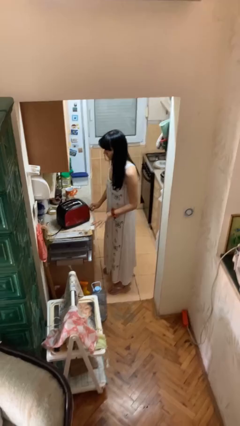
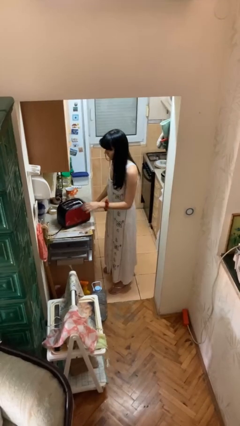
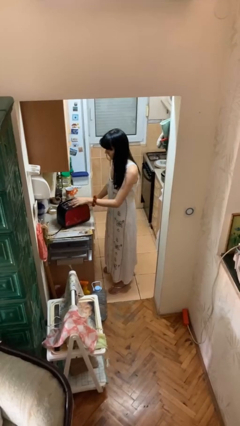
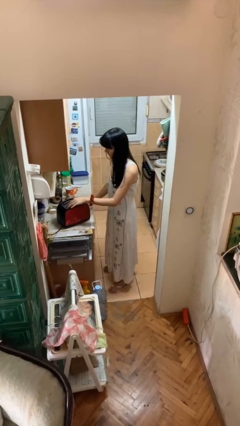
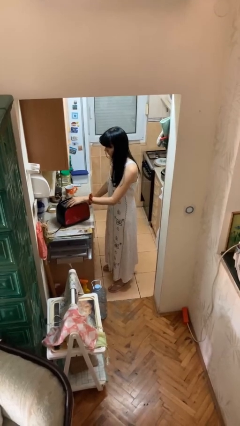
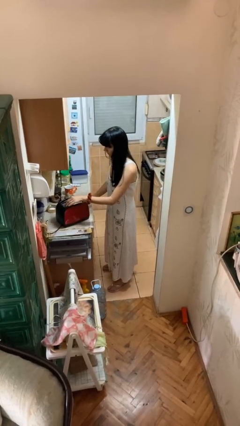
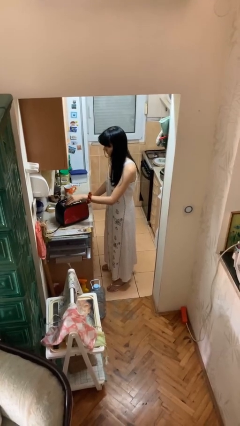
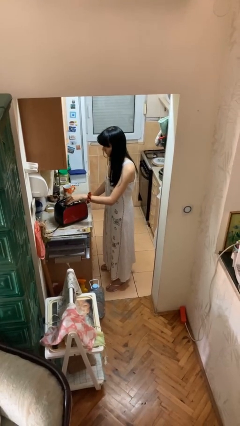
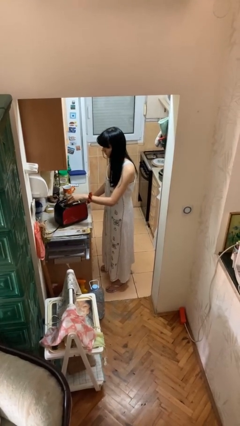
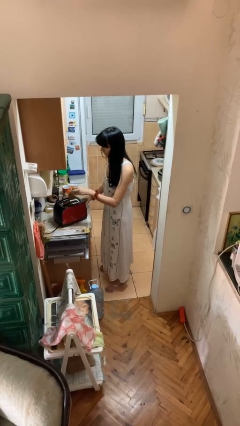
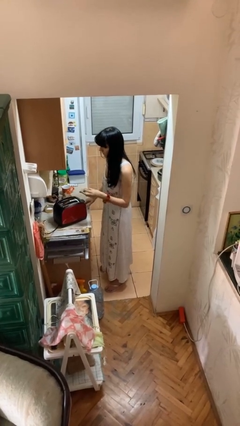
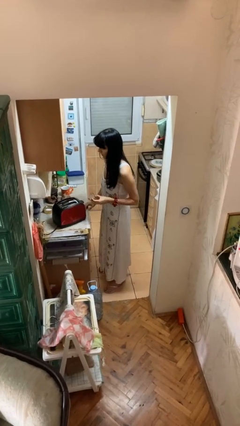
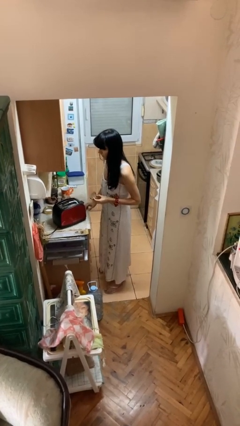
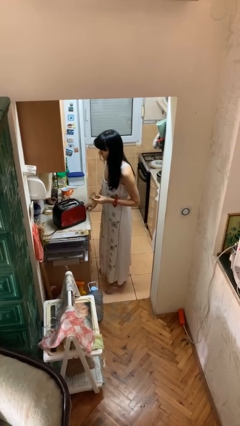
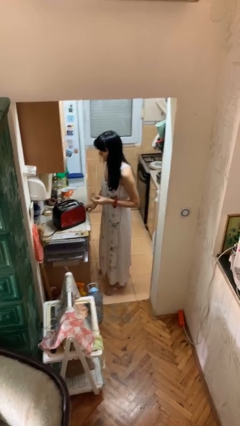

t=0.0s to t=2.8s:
person takes object from toaster

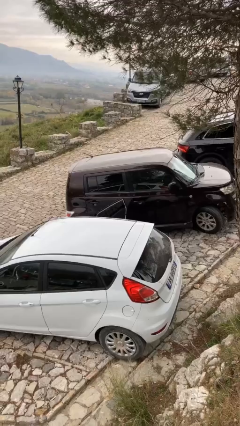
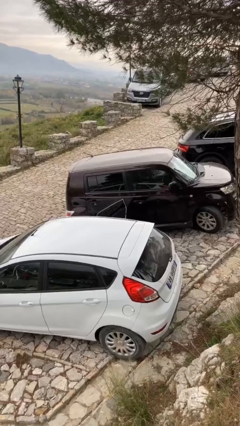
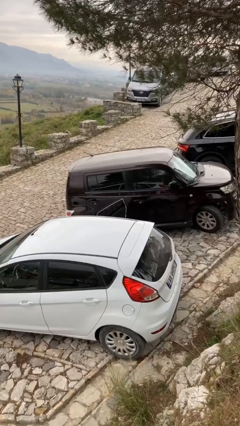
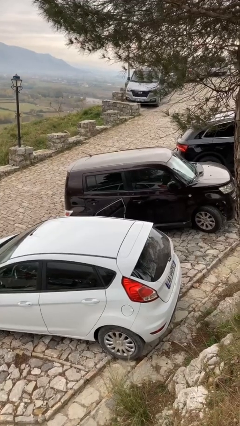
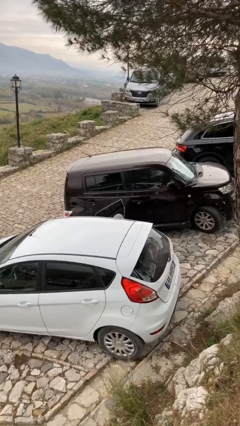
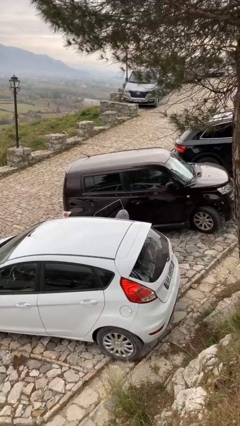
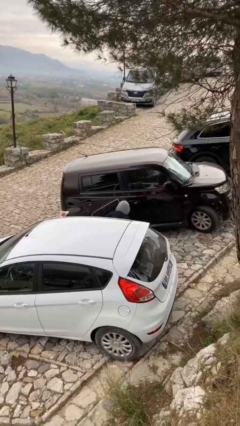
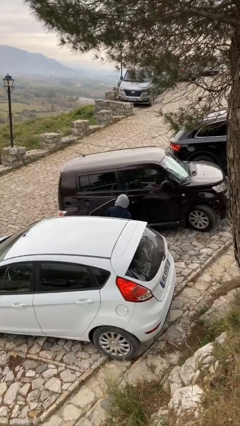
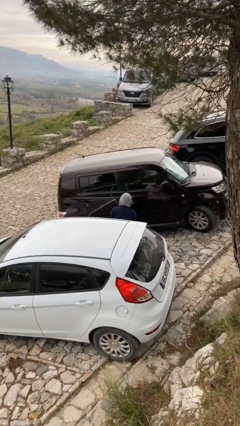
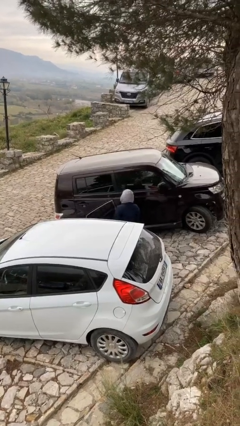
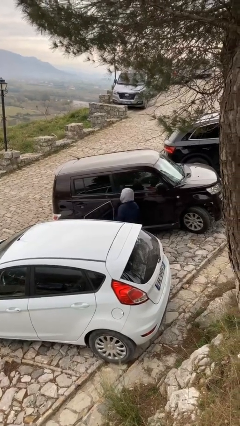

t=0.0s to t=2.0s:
person exits car

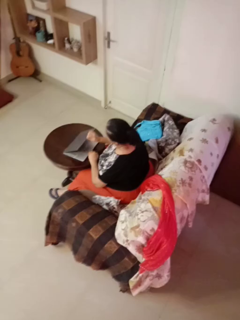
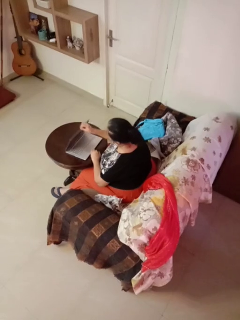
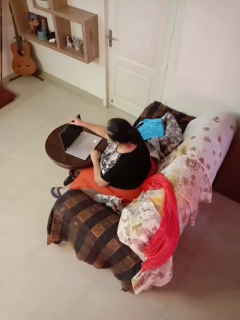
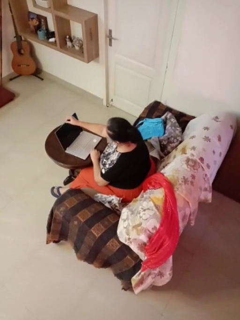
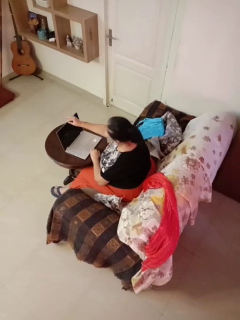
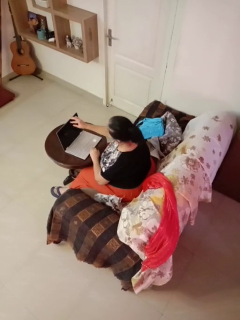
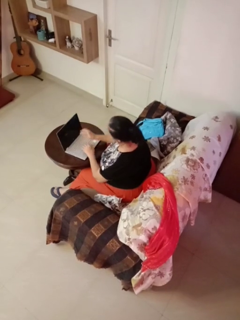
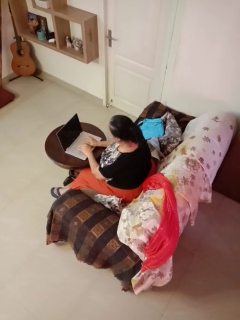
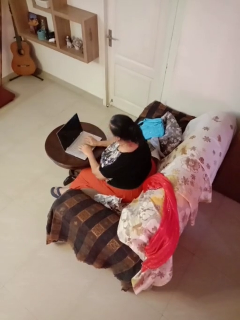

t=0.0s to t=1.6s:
person opens laptop

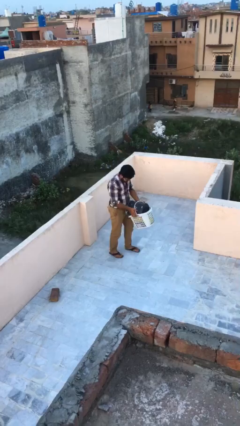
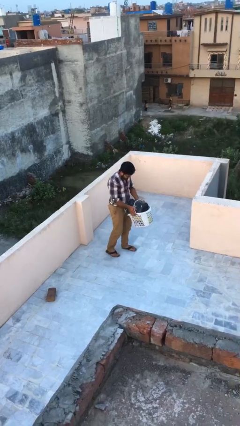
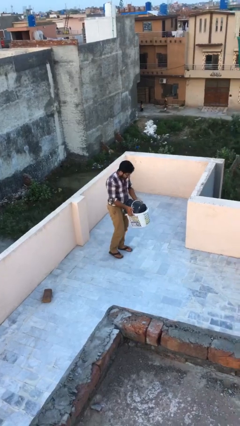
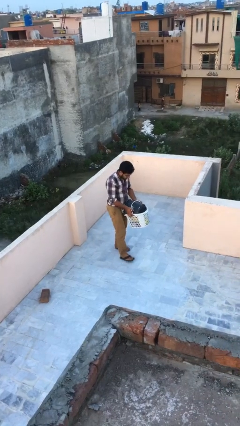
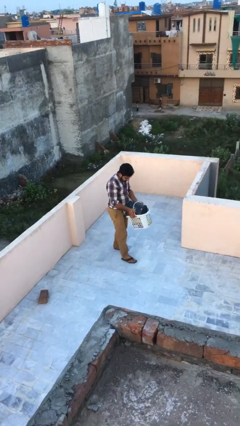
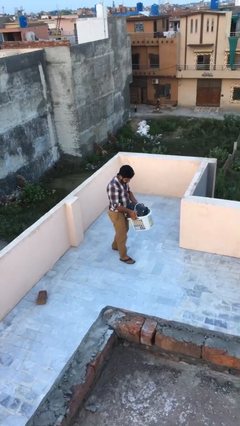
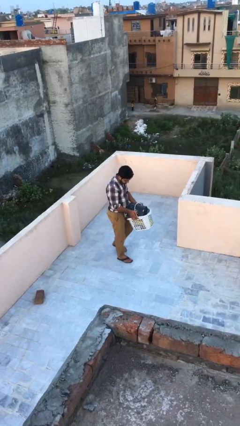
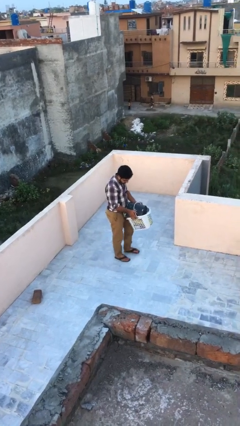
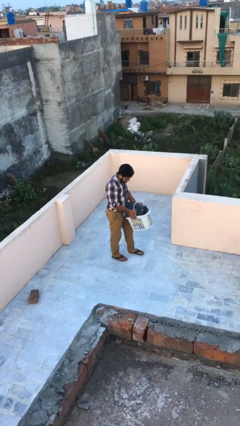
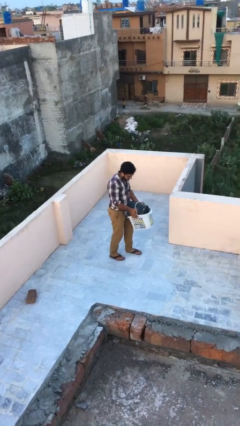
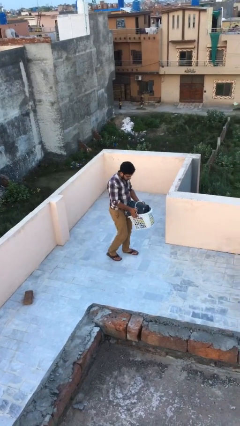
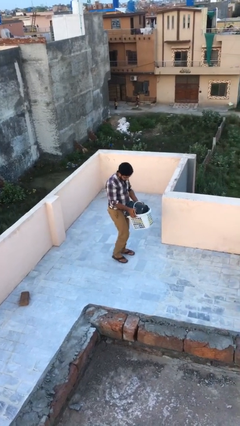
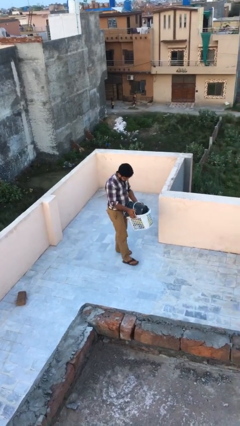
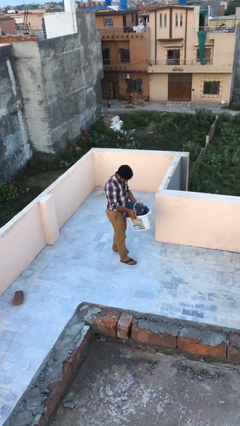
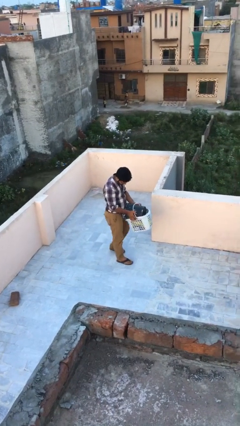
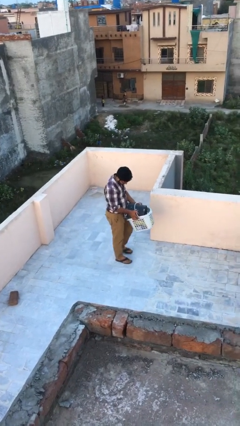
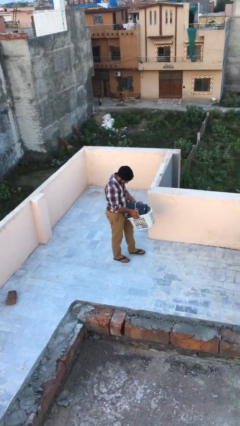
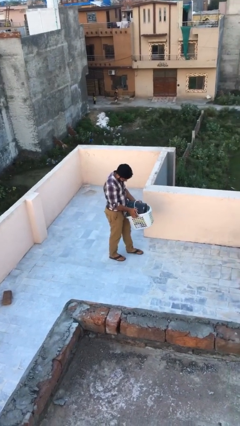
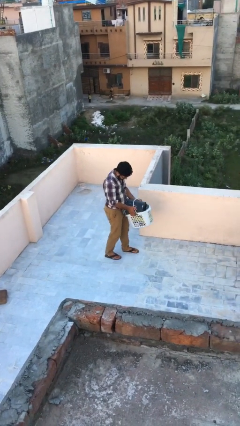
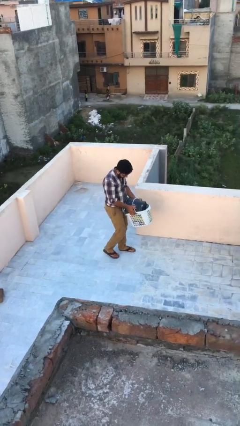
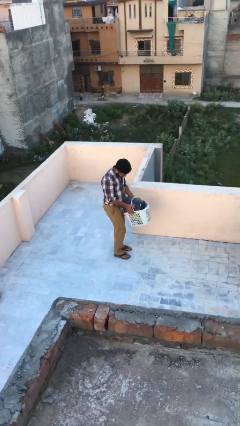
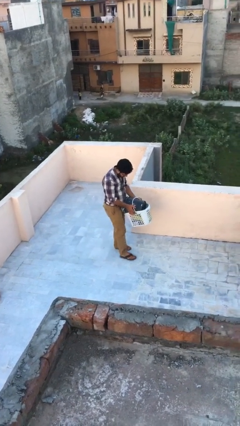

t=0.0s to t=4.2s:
person carries heavy object

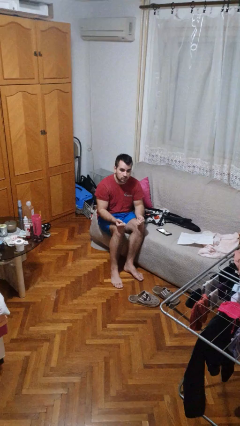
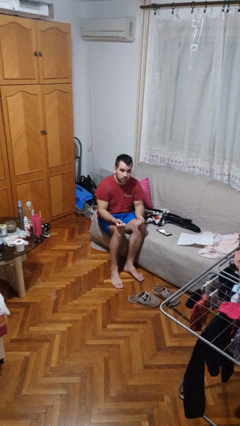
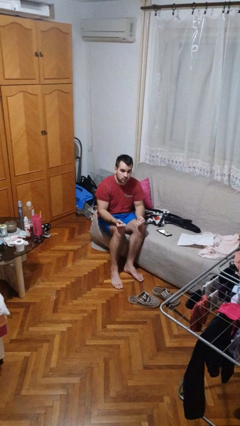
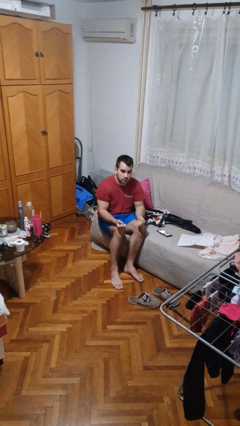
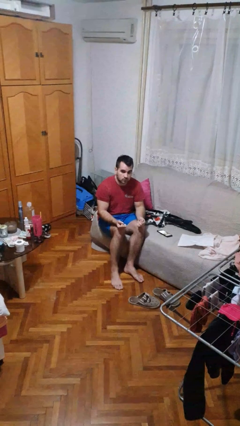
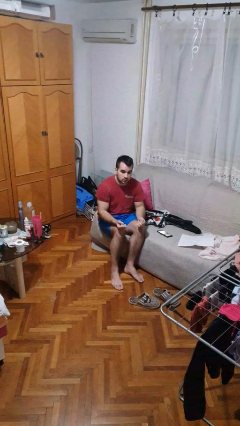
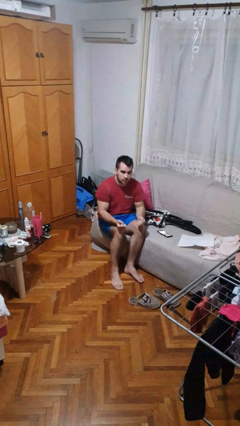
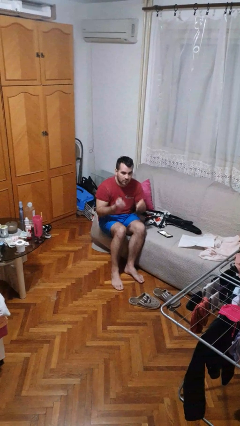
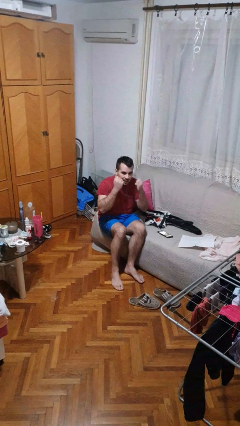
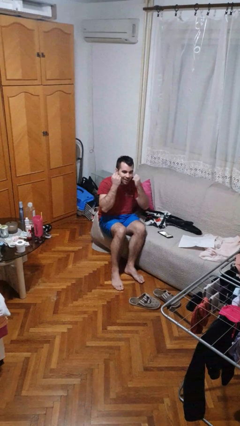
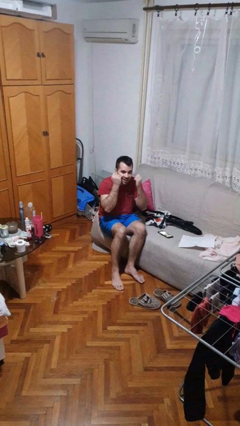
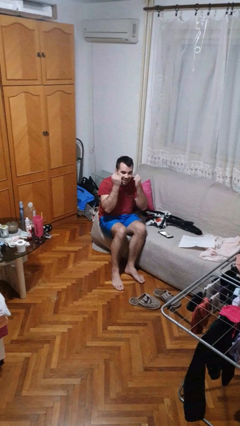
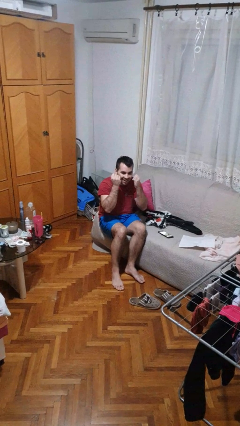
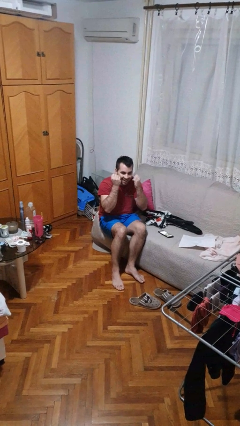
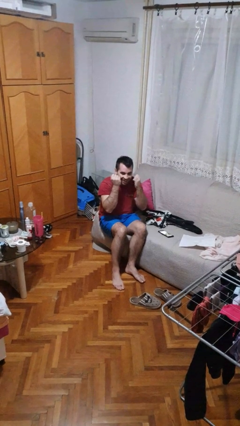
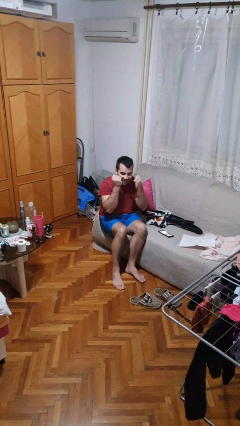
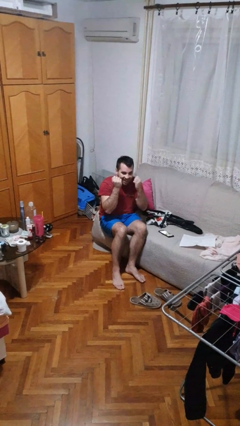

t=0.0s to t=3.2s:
person flosses

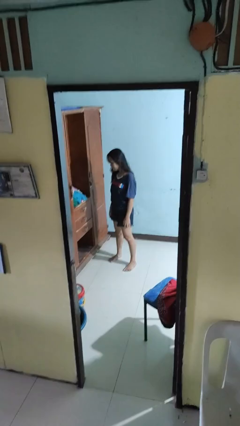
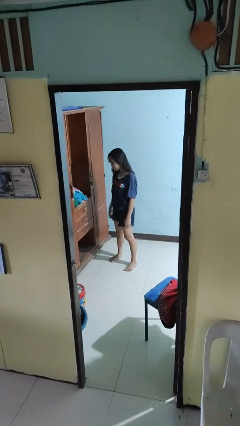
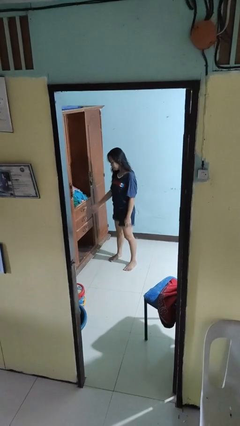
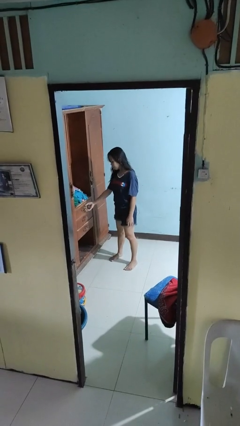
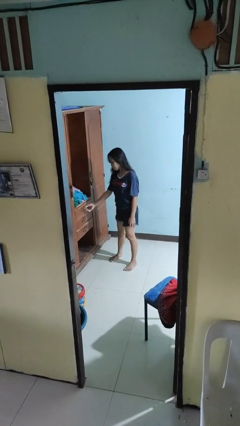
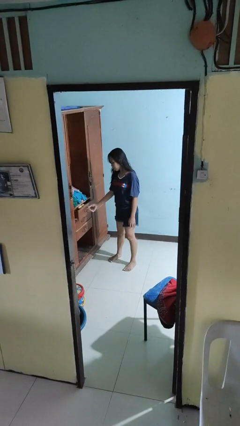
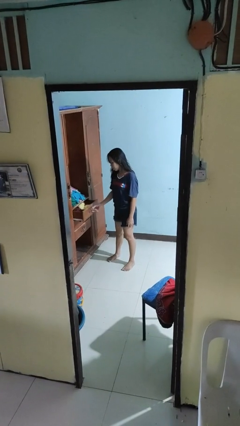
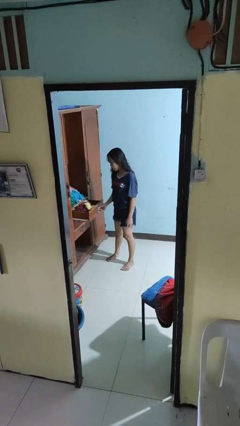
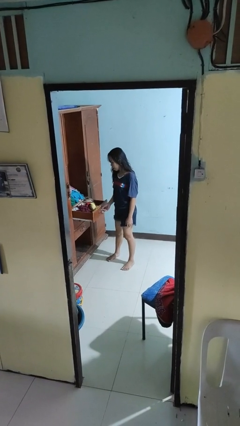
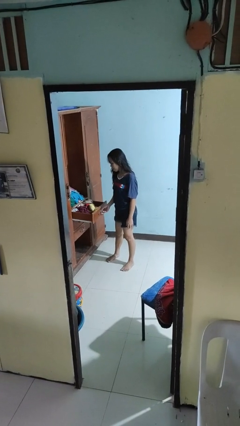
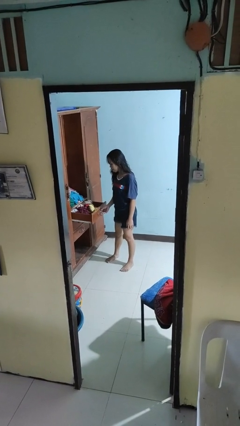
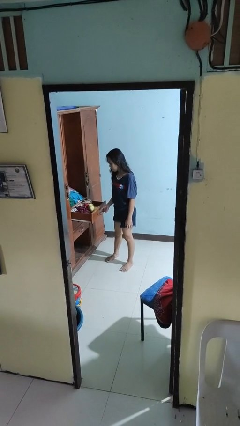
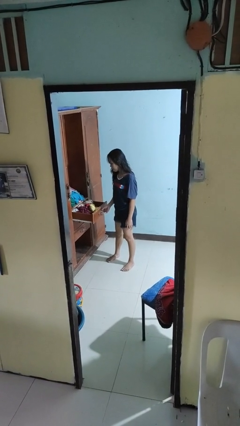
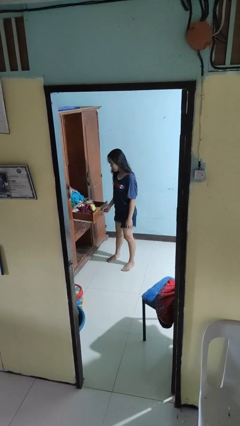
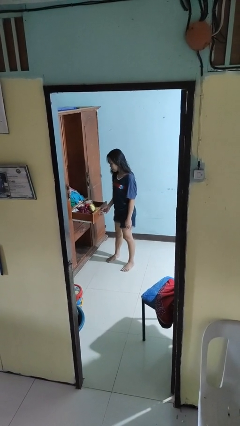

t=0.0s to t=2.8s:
person opens dresser drawer

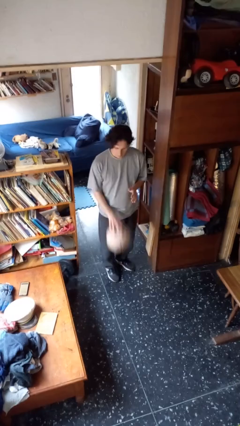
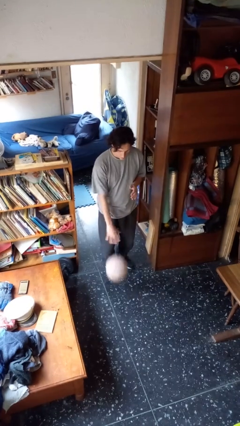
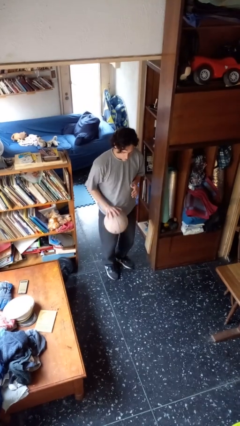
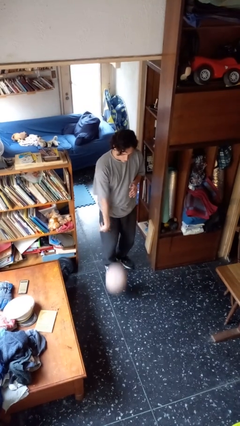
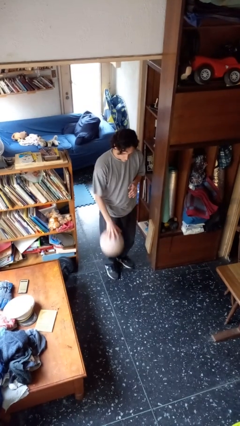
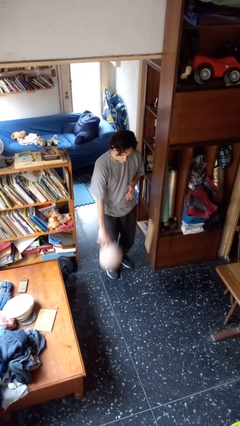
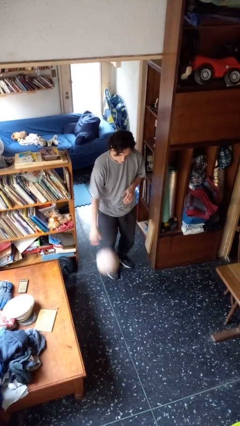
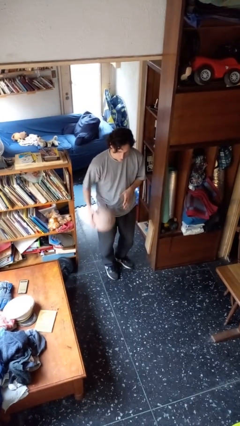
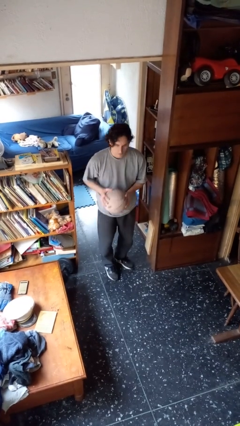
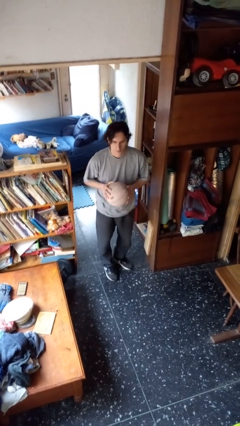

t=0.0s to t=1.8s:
person bounces ball on floor
